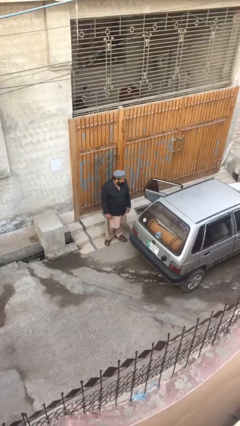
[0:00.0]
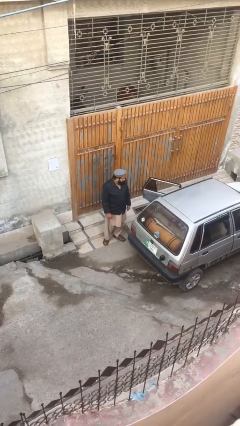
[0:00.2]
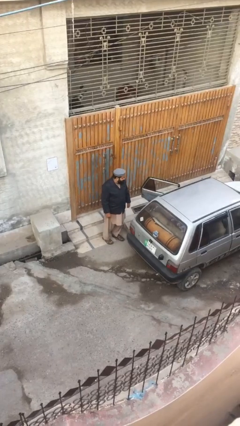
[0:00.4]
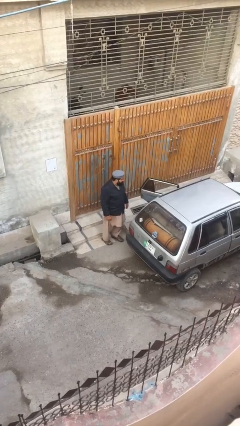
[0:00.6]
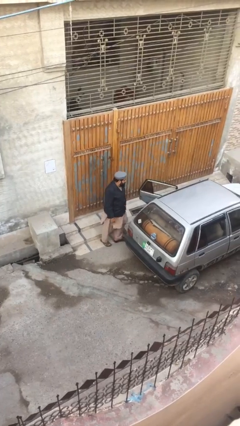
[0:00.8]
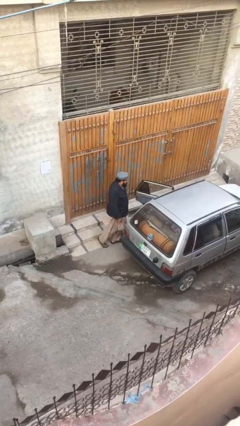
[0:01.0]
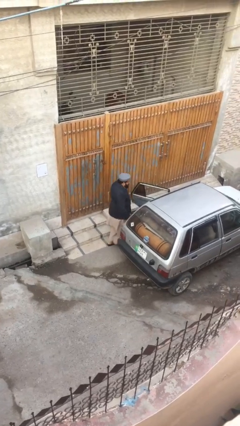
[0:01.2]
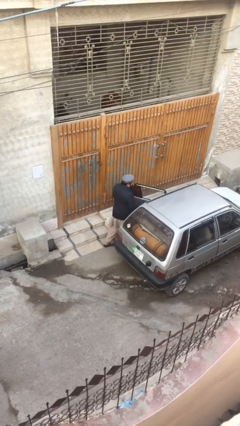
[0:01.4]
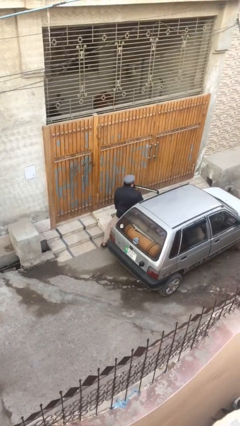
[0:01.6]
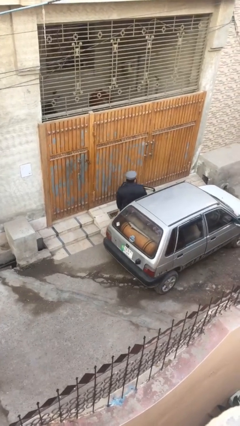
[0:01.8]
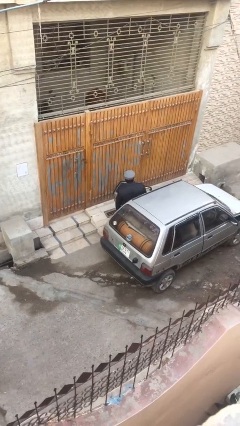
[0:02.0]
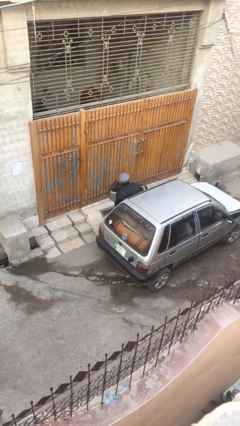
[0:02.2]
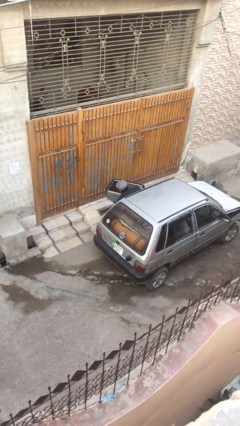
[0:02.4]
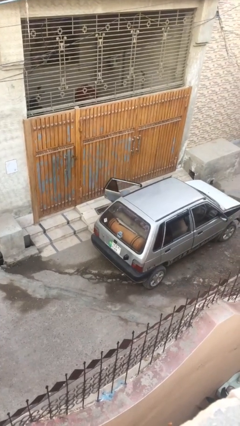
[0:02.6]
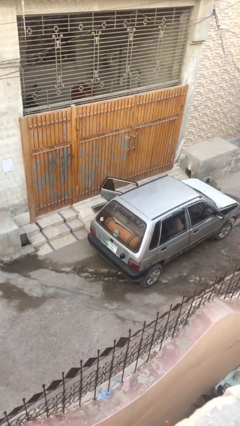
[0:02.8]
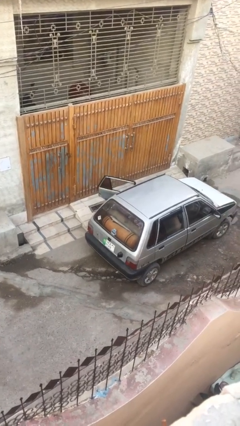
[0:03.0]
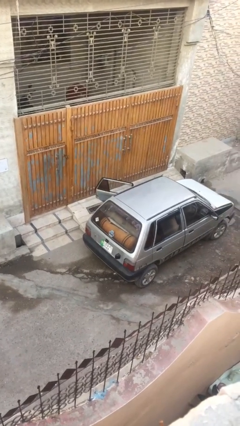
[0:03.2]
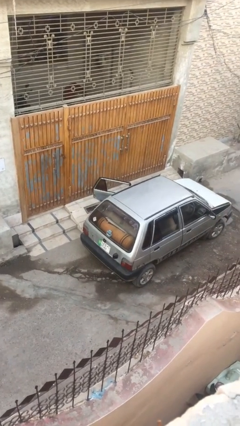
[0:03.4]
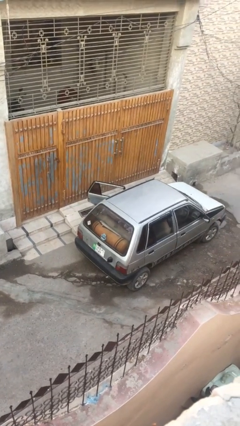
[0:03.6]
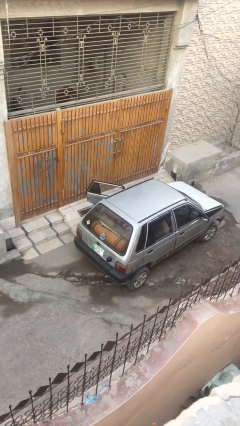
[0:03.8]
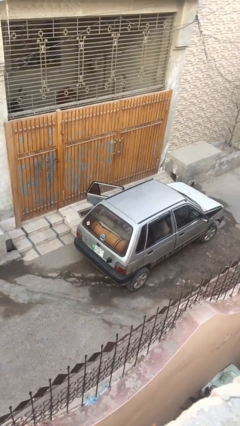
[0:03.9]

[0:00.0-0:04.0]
person enters car

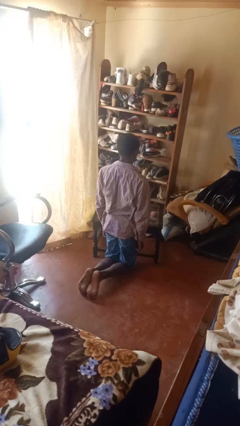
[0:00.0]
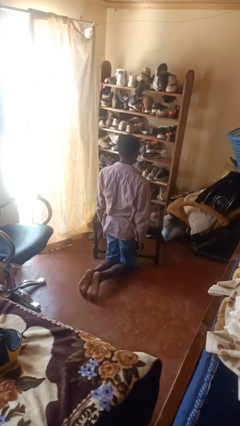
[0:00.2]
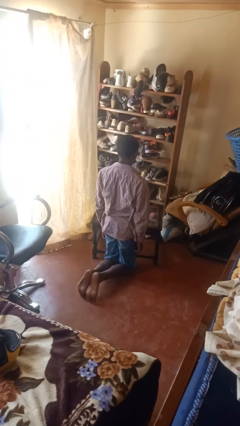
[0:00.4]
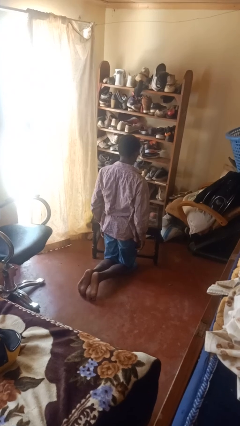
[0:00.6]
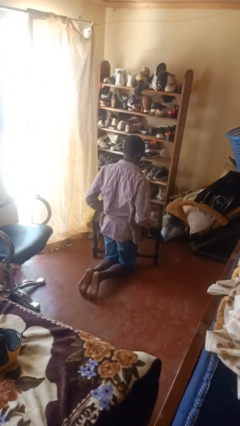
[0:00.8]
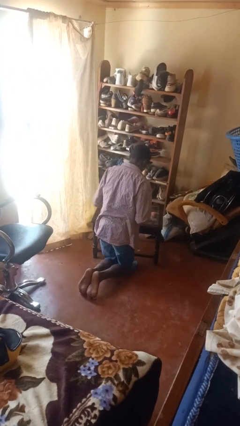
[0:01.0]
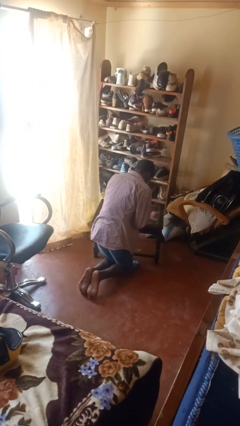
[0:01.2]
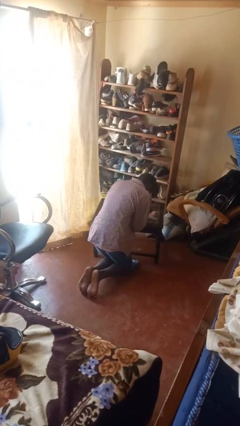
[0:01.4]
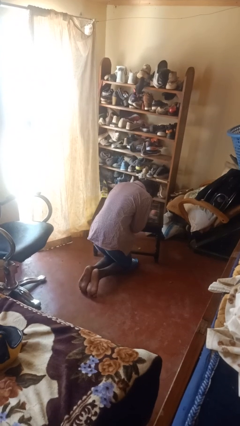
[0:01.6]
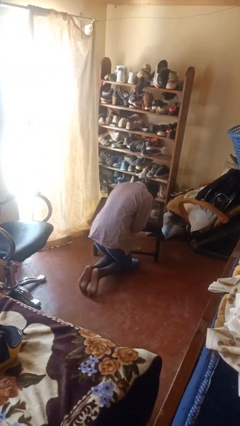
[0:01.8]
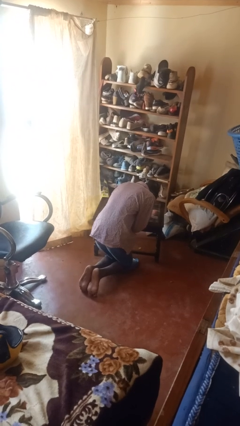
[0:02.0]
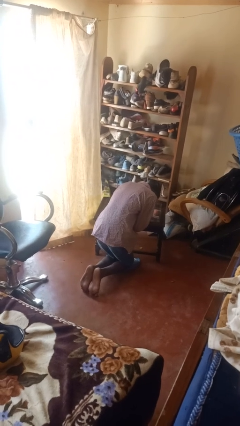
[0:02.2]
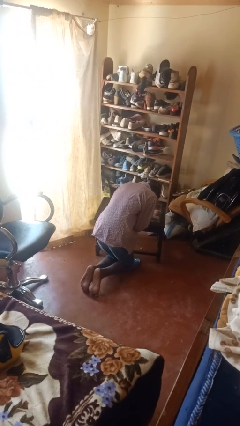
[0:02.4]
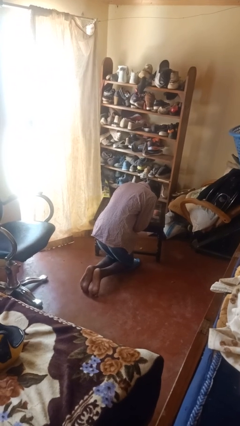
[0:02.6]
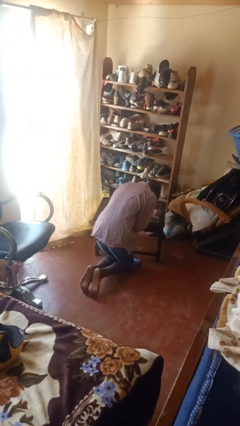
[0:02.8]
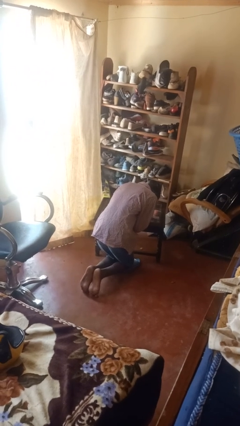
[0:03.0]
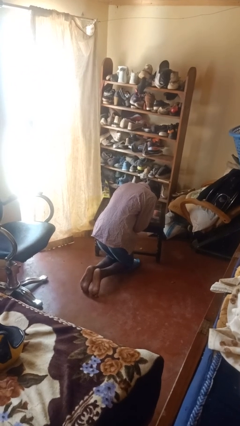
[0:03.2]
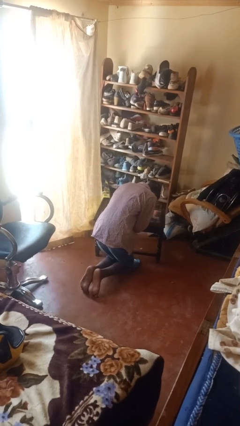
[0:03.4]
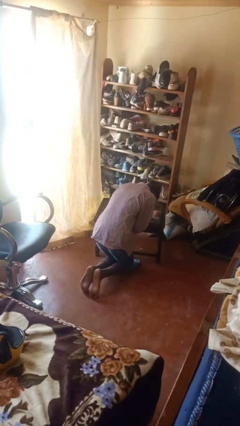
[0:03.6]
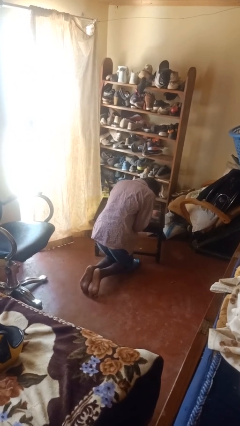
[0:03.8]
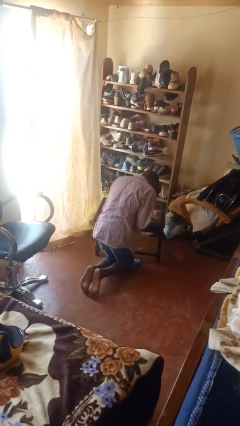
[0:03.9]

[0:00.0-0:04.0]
person prays

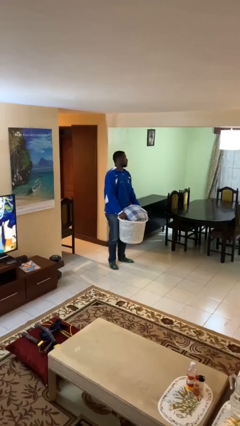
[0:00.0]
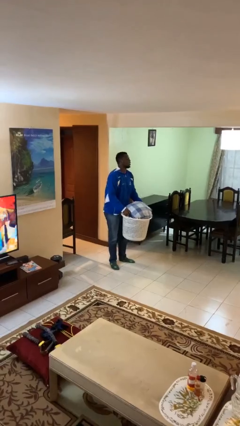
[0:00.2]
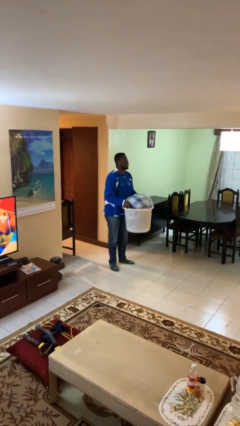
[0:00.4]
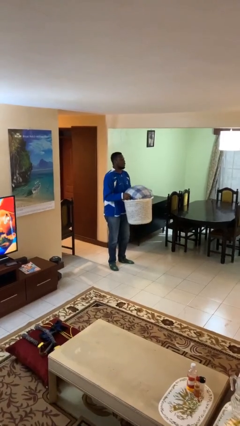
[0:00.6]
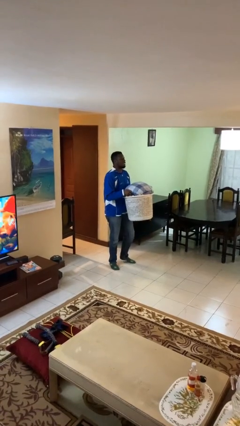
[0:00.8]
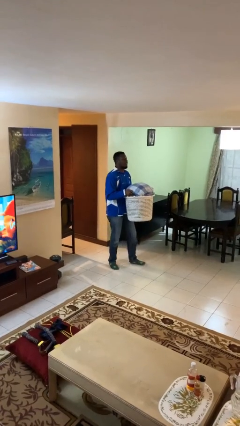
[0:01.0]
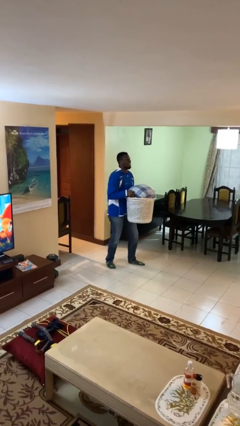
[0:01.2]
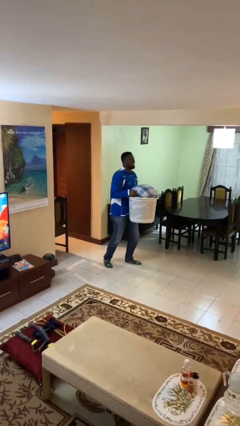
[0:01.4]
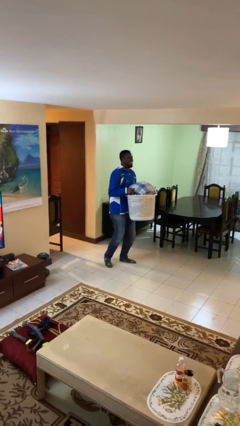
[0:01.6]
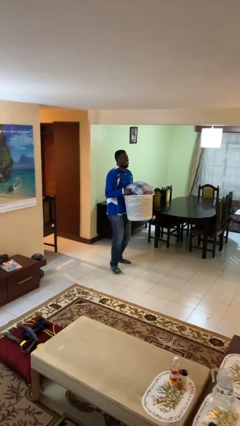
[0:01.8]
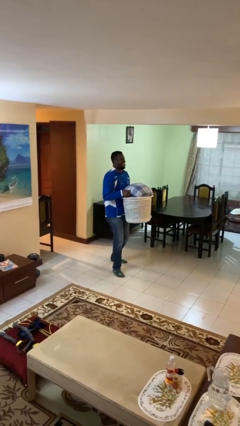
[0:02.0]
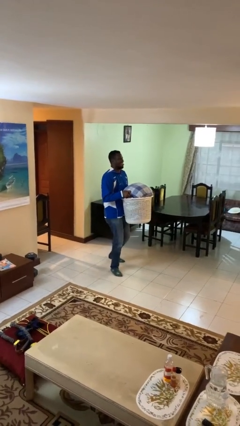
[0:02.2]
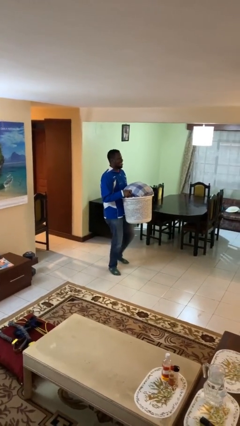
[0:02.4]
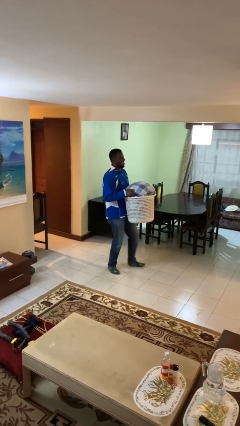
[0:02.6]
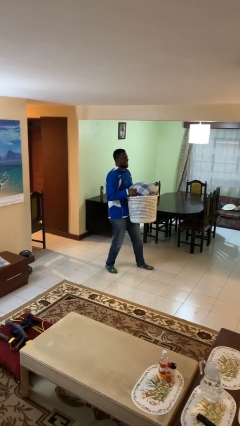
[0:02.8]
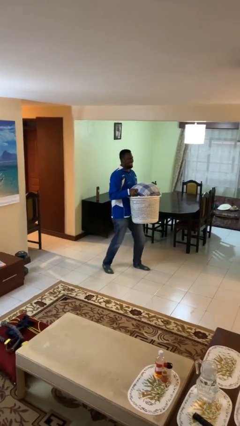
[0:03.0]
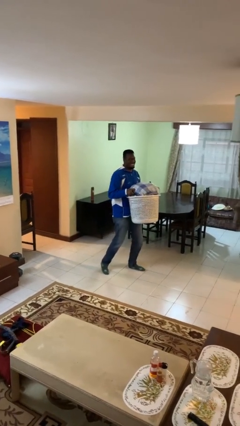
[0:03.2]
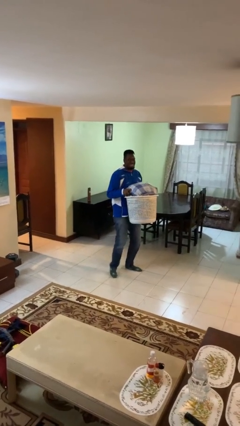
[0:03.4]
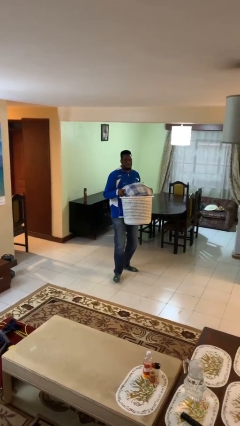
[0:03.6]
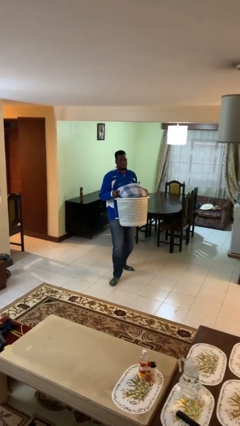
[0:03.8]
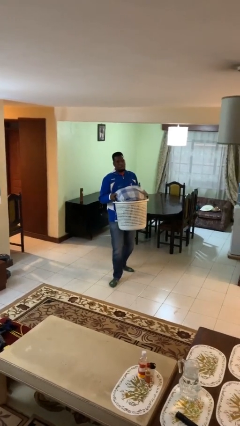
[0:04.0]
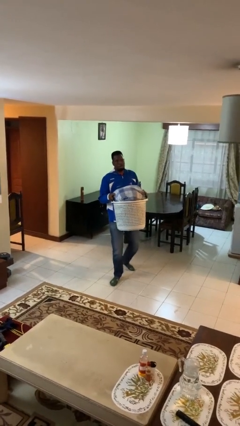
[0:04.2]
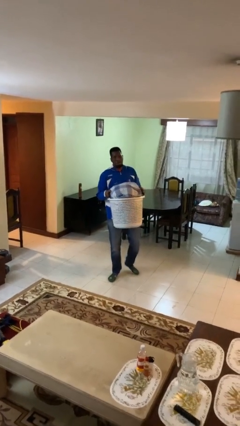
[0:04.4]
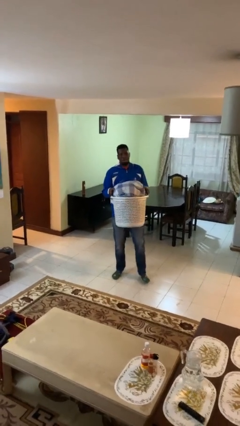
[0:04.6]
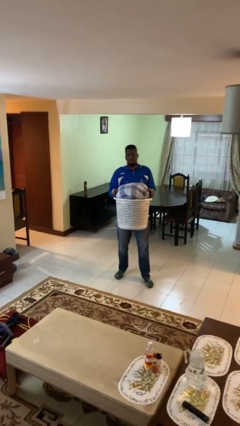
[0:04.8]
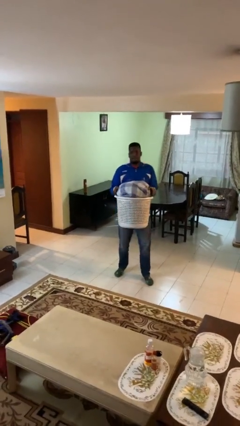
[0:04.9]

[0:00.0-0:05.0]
person carries heavy object

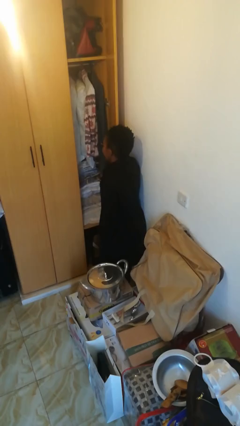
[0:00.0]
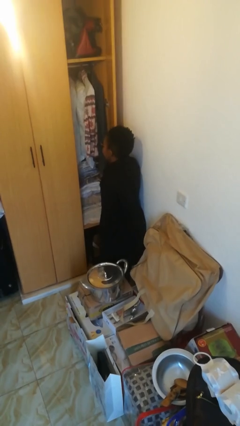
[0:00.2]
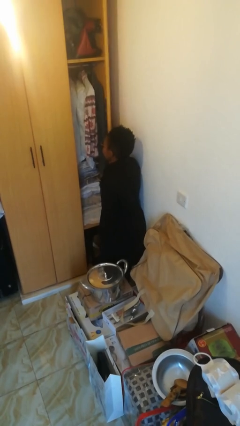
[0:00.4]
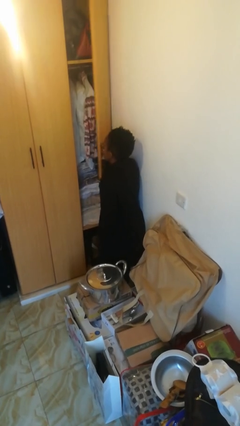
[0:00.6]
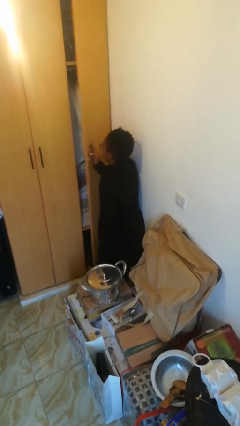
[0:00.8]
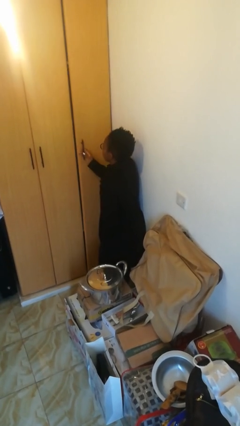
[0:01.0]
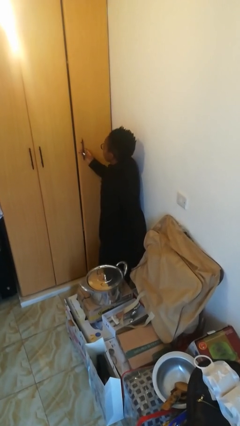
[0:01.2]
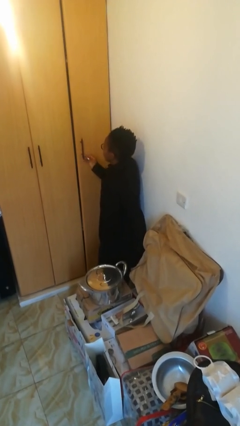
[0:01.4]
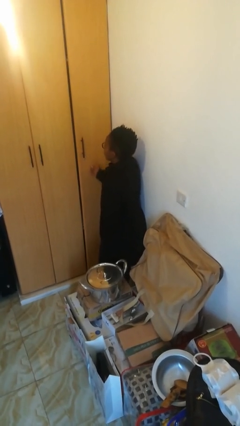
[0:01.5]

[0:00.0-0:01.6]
person closes closet door

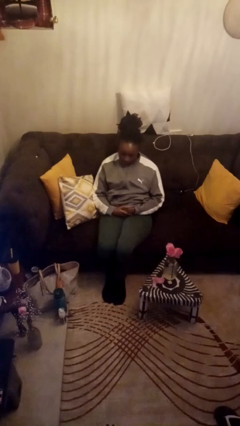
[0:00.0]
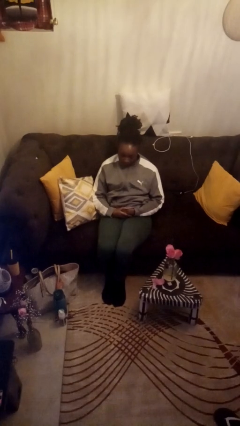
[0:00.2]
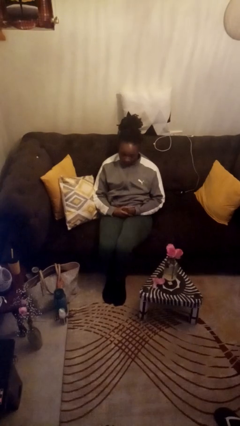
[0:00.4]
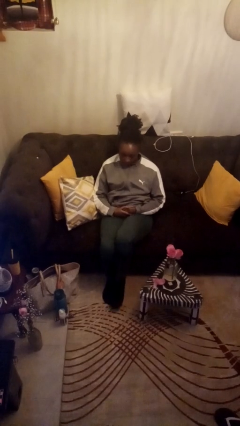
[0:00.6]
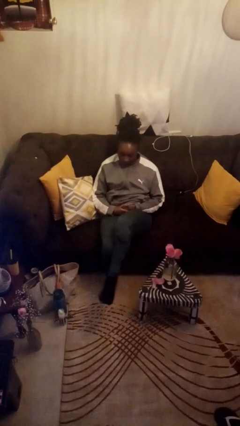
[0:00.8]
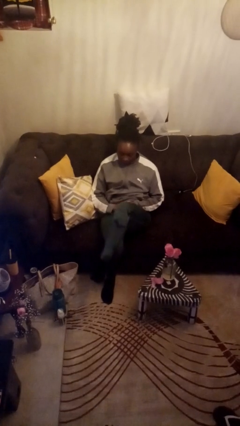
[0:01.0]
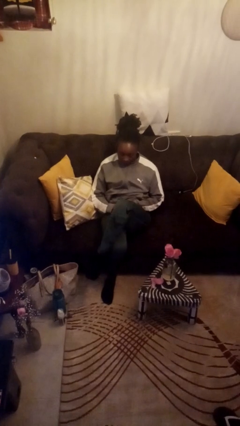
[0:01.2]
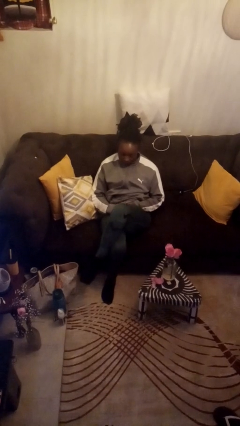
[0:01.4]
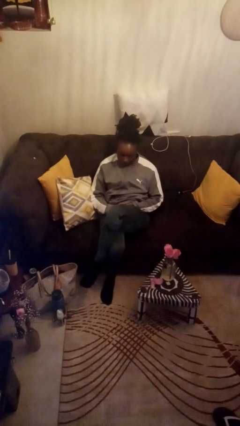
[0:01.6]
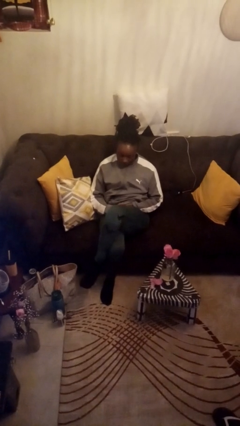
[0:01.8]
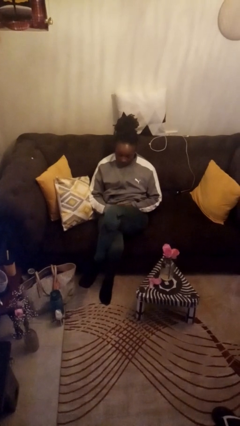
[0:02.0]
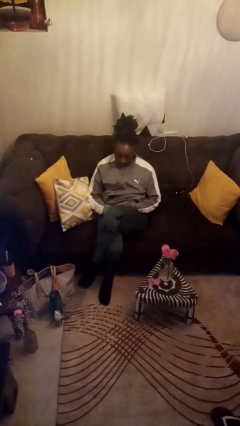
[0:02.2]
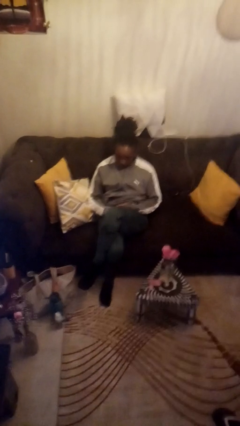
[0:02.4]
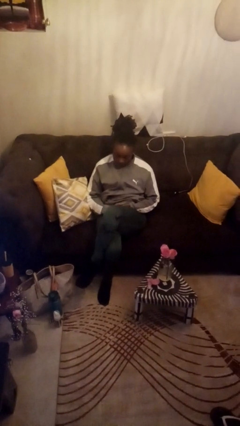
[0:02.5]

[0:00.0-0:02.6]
person crosses legs
